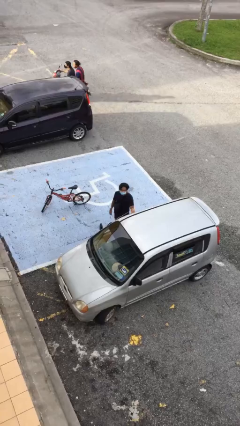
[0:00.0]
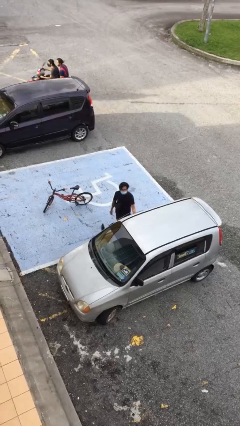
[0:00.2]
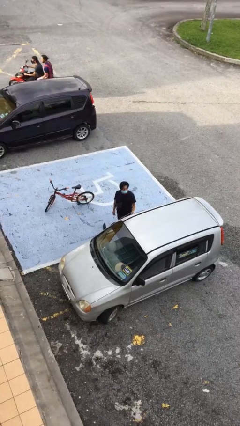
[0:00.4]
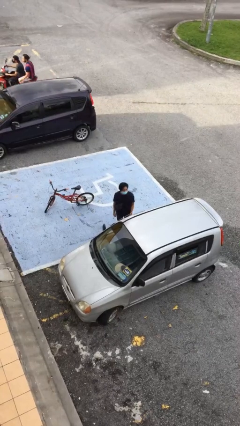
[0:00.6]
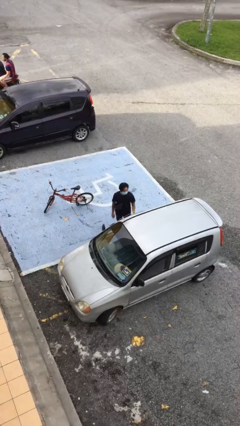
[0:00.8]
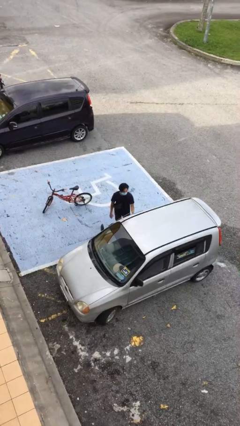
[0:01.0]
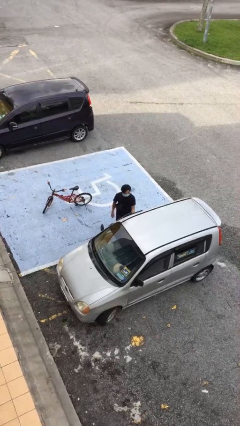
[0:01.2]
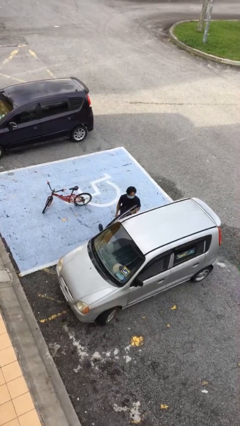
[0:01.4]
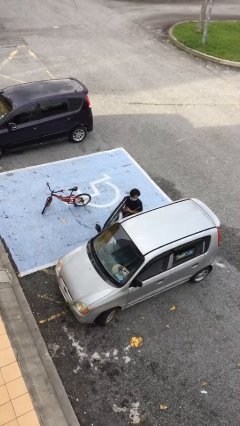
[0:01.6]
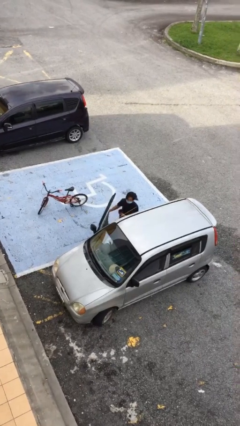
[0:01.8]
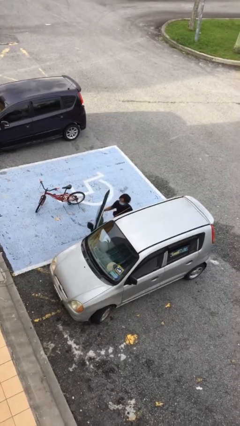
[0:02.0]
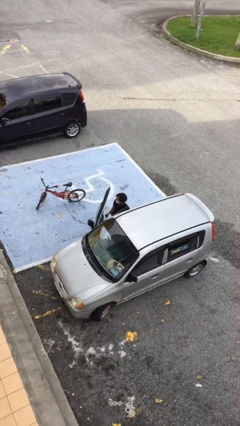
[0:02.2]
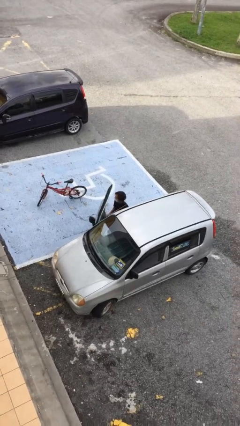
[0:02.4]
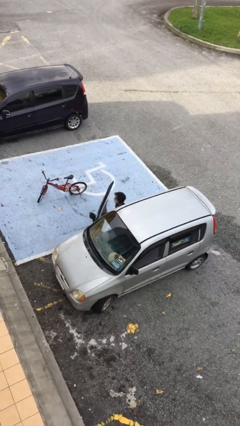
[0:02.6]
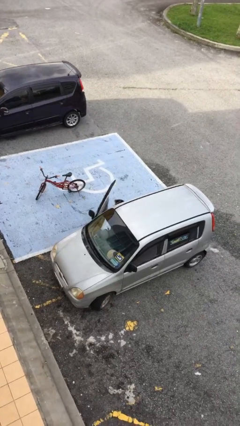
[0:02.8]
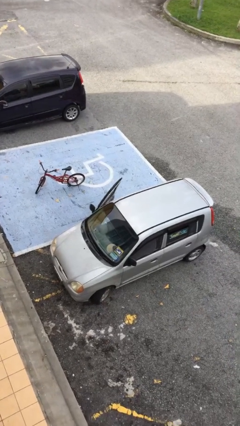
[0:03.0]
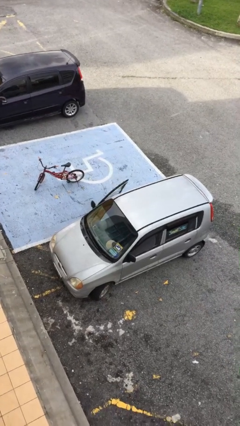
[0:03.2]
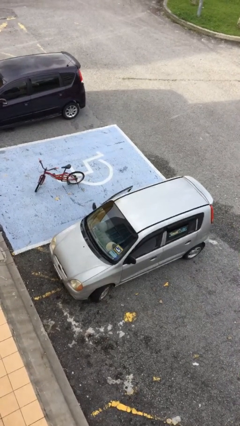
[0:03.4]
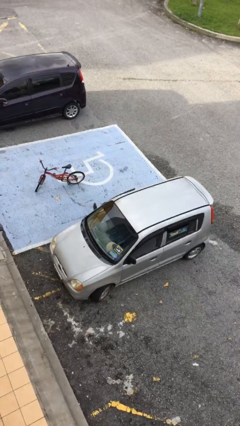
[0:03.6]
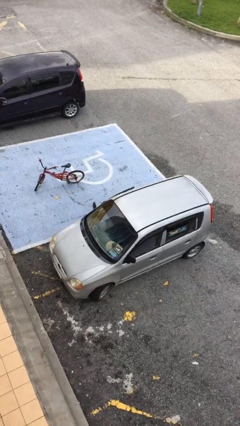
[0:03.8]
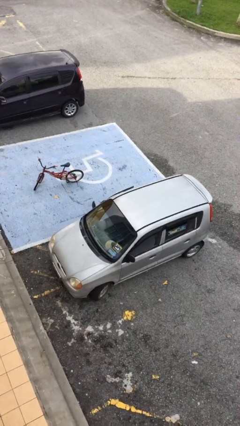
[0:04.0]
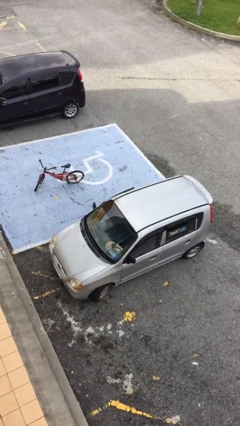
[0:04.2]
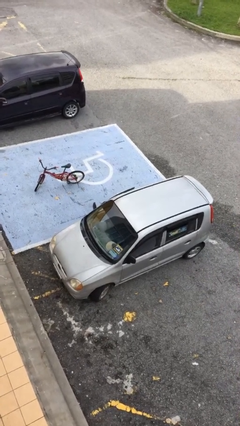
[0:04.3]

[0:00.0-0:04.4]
person enters car

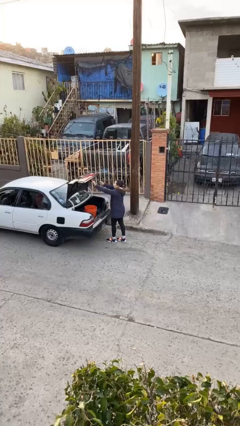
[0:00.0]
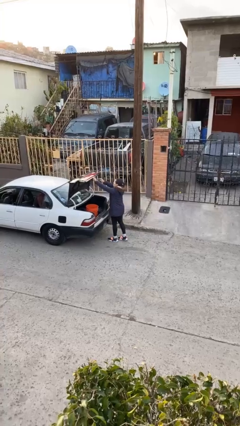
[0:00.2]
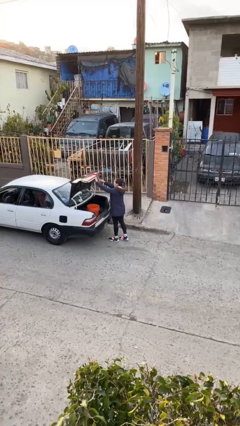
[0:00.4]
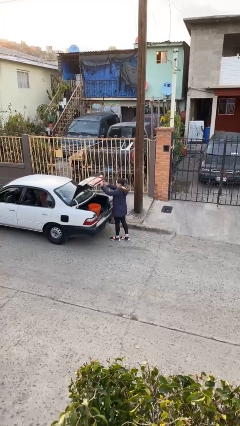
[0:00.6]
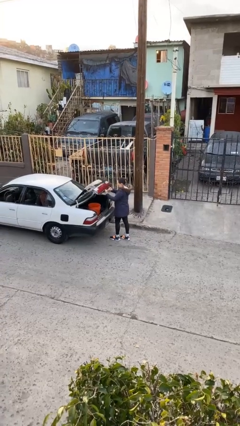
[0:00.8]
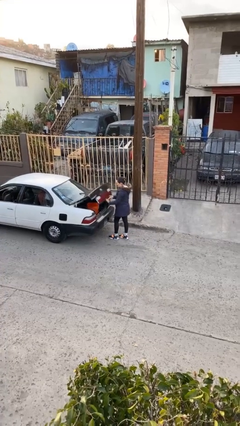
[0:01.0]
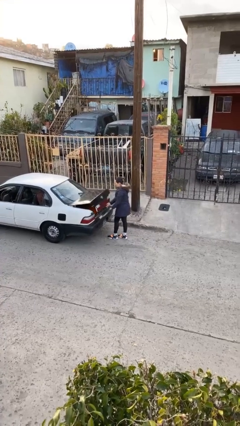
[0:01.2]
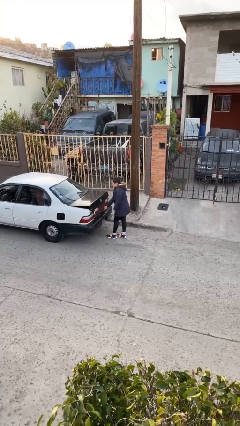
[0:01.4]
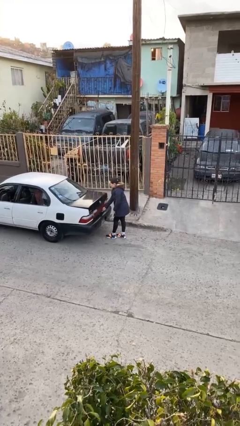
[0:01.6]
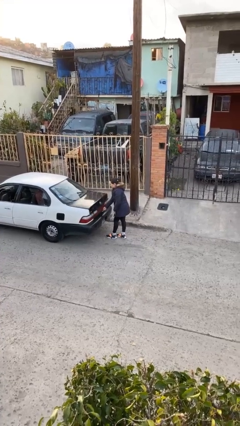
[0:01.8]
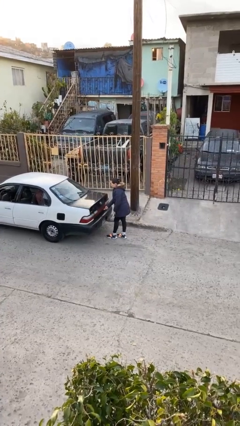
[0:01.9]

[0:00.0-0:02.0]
person closes car trunk

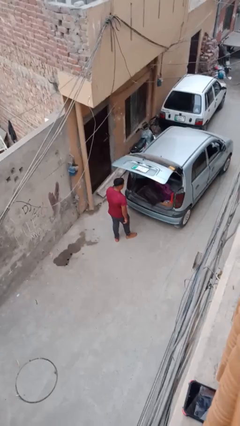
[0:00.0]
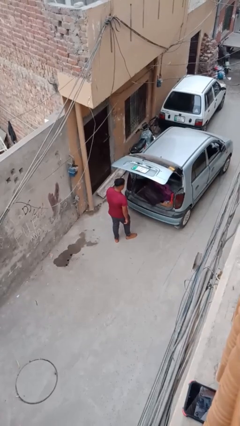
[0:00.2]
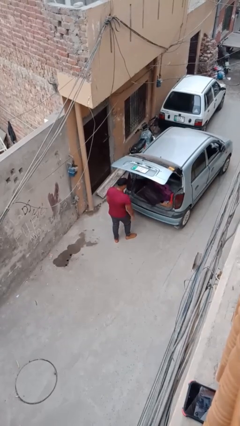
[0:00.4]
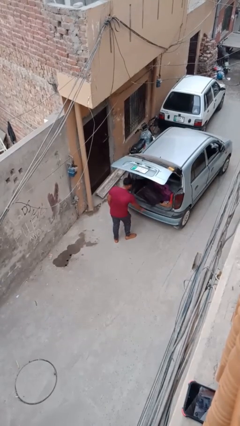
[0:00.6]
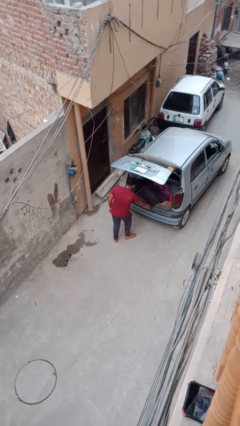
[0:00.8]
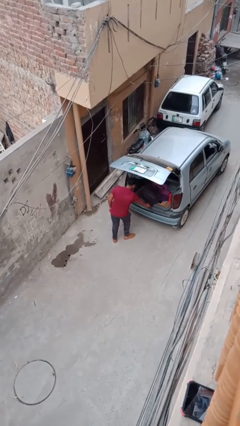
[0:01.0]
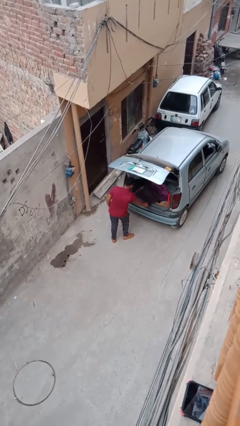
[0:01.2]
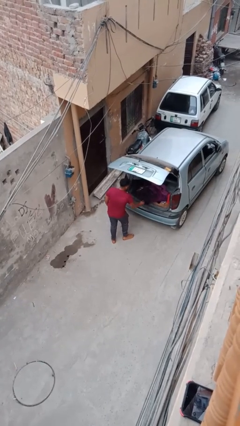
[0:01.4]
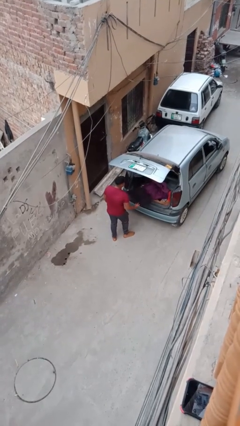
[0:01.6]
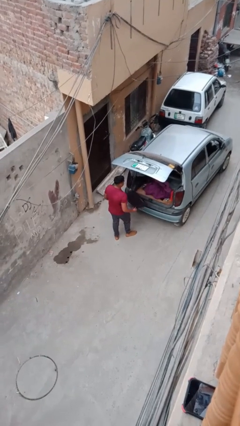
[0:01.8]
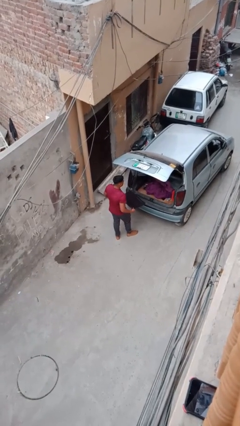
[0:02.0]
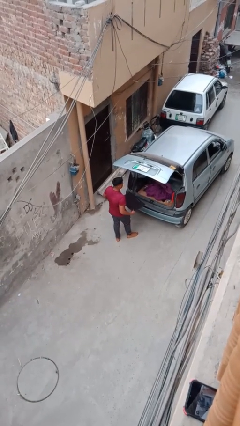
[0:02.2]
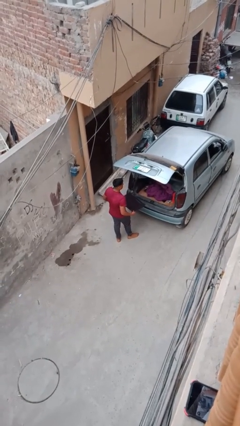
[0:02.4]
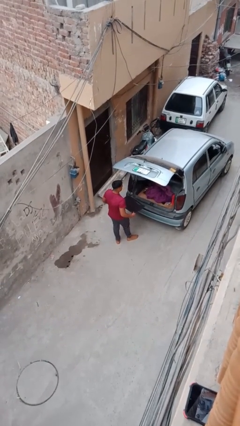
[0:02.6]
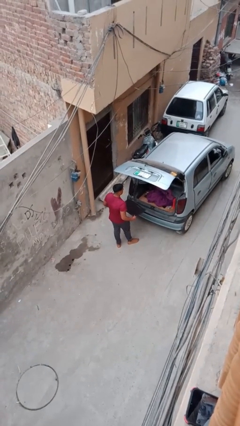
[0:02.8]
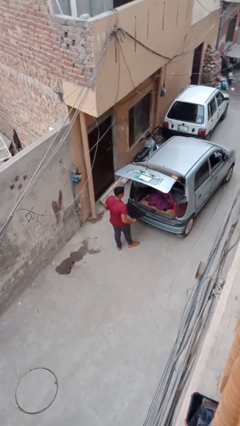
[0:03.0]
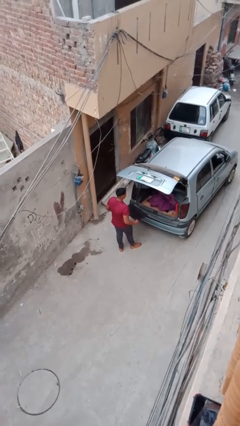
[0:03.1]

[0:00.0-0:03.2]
person unloads car

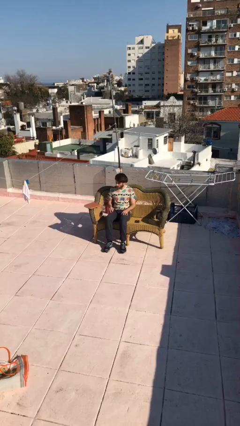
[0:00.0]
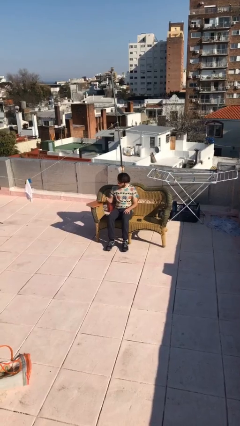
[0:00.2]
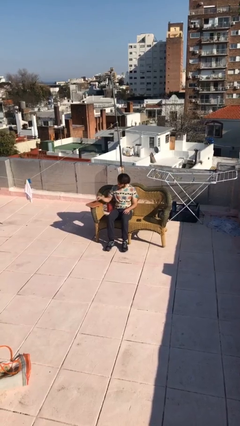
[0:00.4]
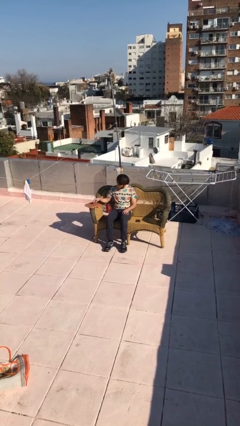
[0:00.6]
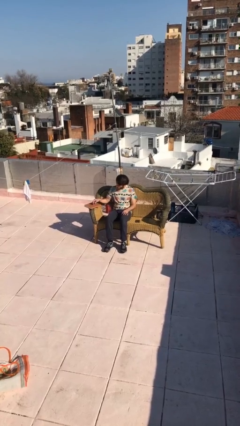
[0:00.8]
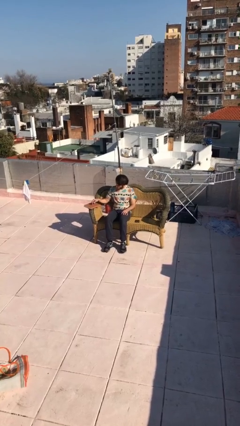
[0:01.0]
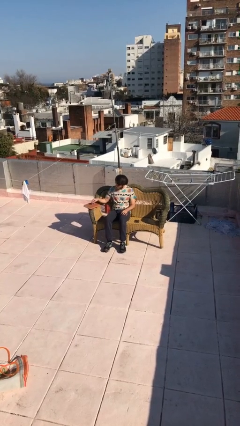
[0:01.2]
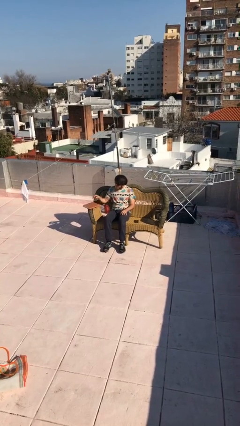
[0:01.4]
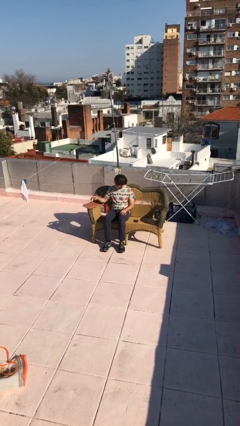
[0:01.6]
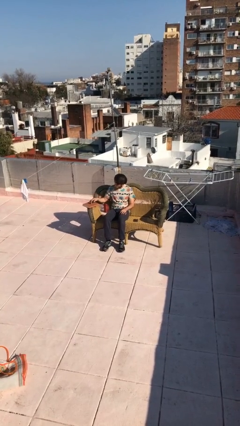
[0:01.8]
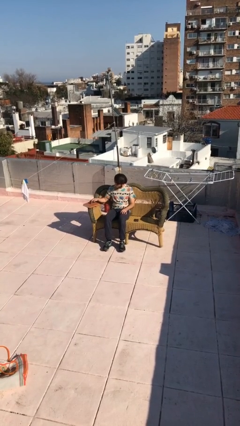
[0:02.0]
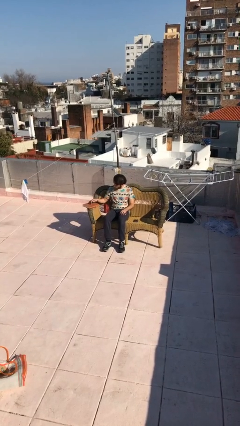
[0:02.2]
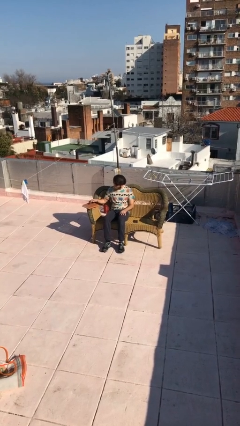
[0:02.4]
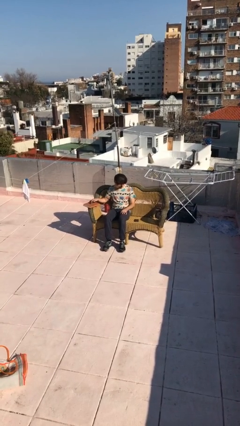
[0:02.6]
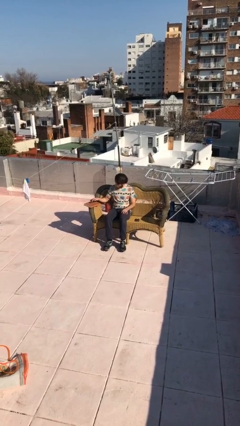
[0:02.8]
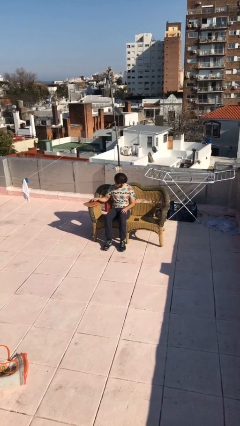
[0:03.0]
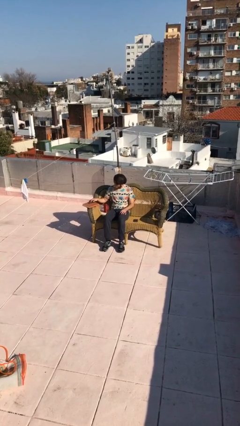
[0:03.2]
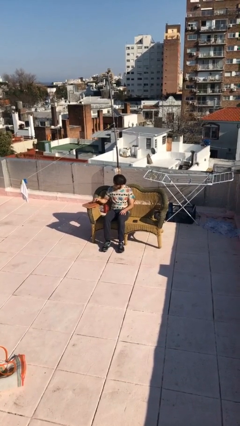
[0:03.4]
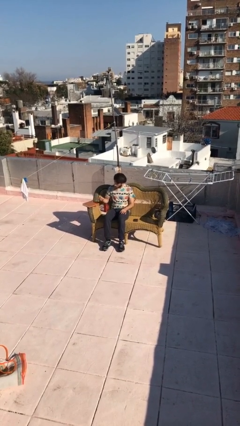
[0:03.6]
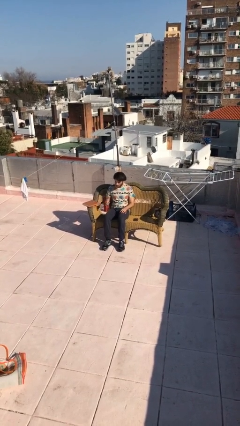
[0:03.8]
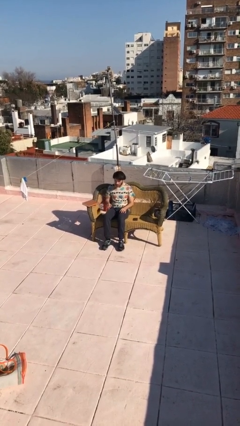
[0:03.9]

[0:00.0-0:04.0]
person taps object with finger

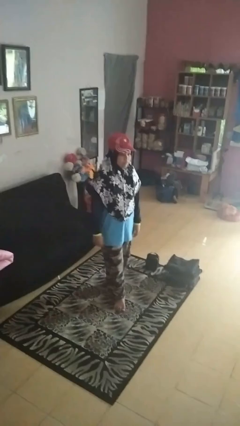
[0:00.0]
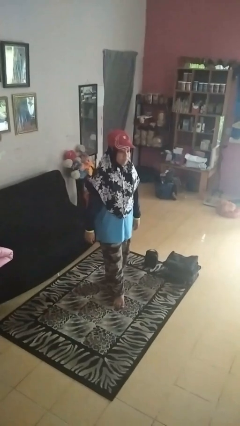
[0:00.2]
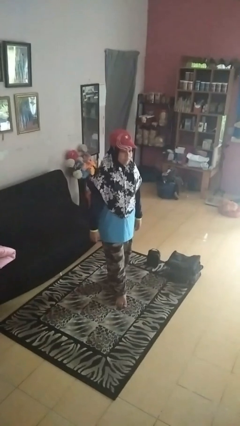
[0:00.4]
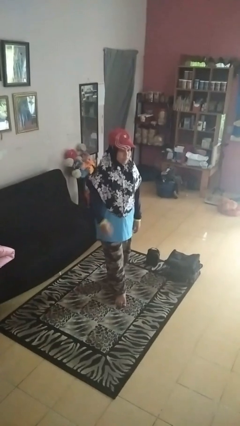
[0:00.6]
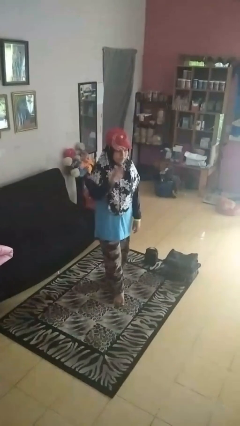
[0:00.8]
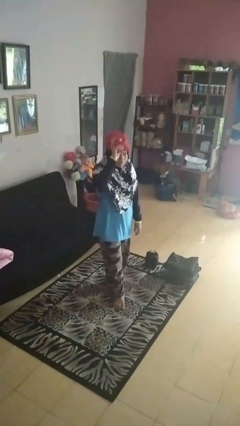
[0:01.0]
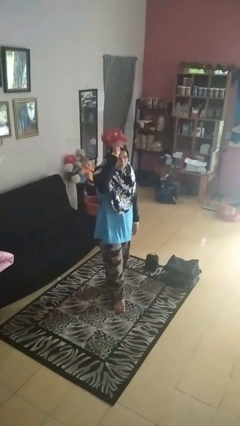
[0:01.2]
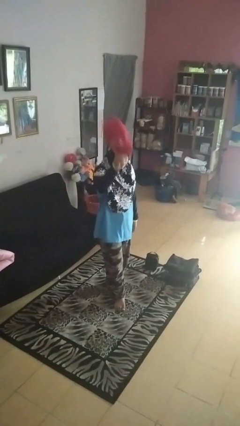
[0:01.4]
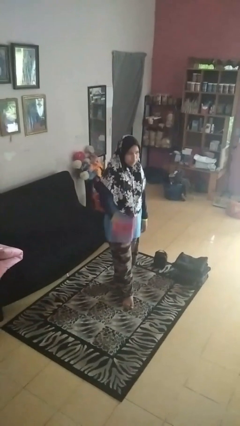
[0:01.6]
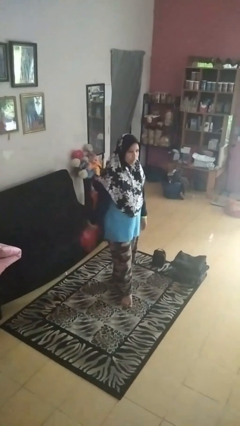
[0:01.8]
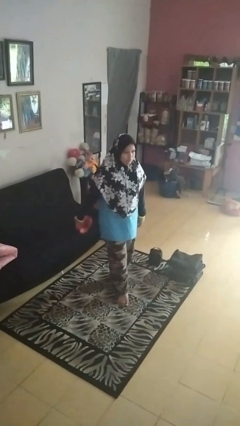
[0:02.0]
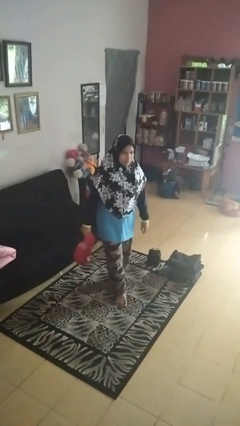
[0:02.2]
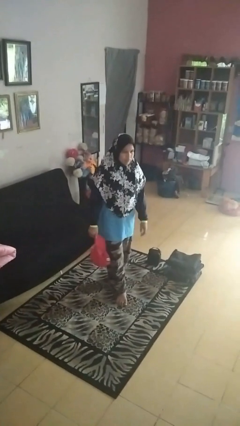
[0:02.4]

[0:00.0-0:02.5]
person takes off hat

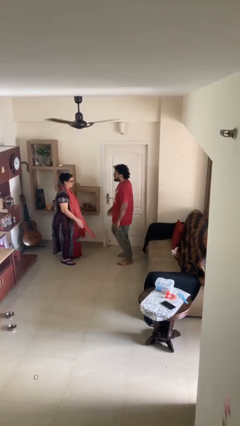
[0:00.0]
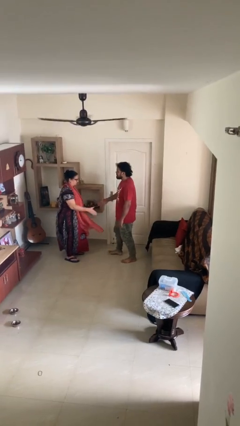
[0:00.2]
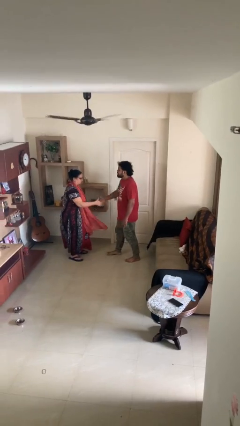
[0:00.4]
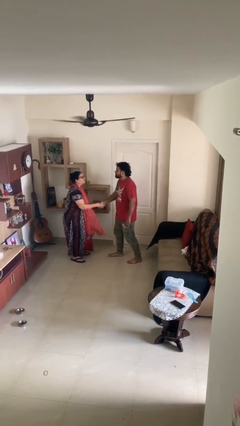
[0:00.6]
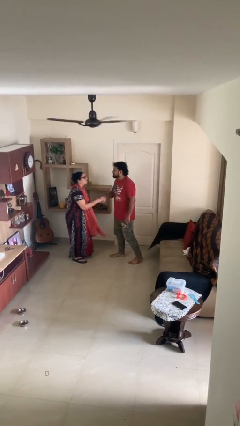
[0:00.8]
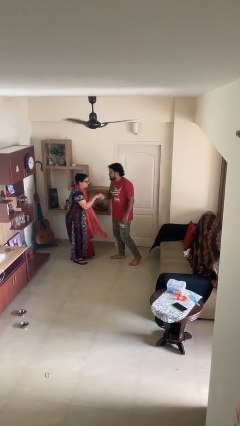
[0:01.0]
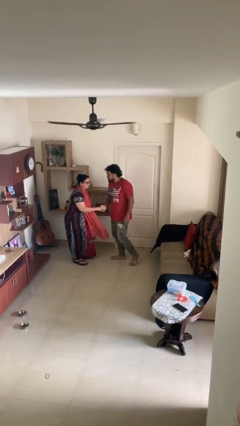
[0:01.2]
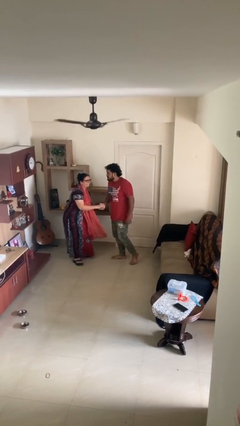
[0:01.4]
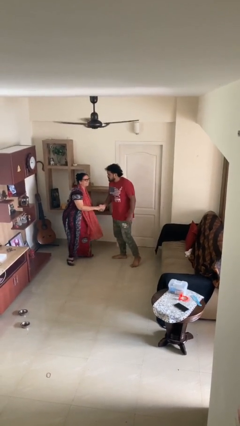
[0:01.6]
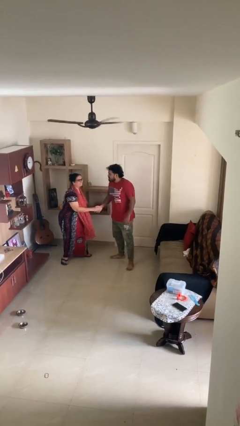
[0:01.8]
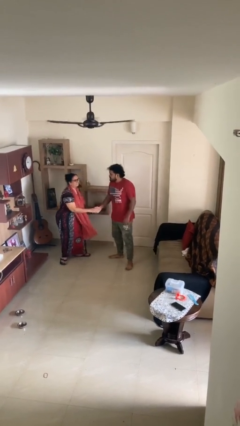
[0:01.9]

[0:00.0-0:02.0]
person shakes hand
